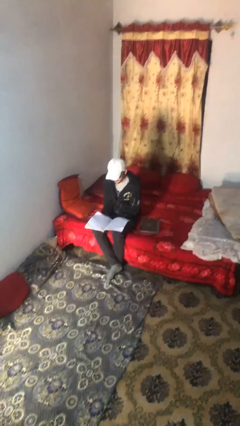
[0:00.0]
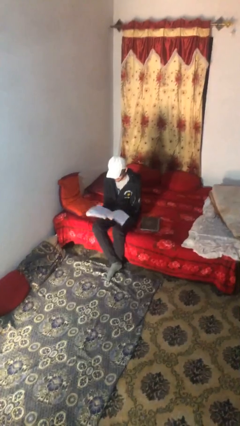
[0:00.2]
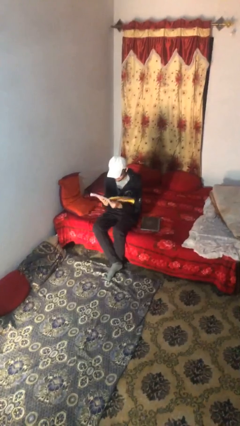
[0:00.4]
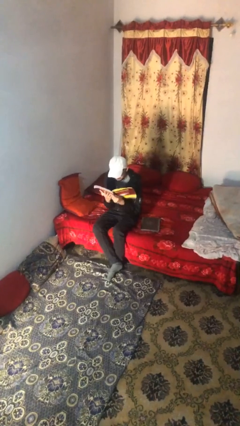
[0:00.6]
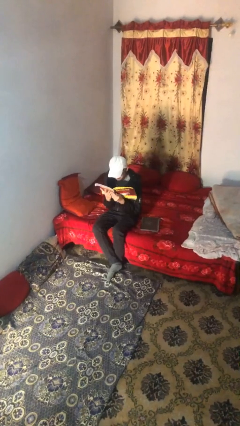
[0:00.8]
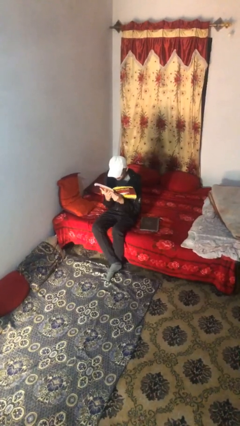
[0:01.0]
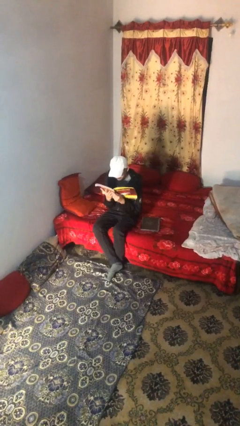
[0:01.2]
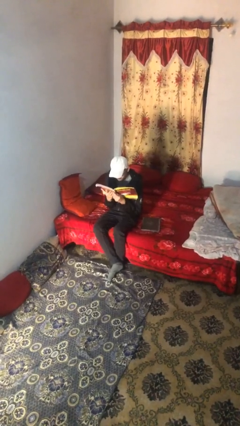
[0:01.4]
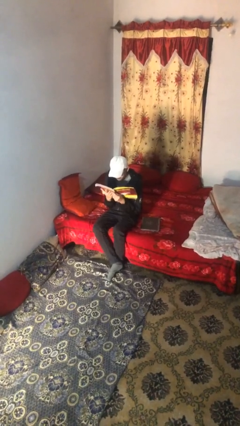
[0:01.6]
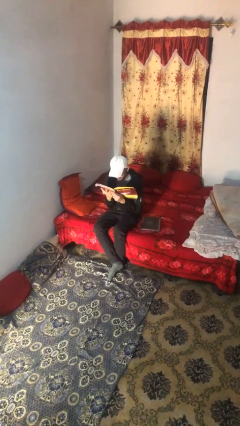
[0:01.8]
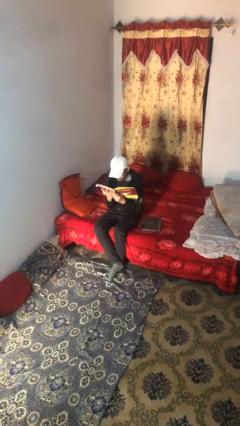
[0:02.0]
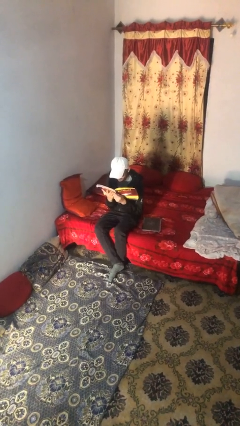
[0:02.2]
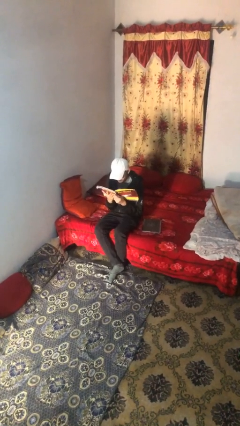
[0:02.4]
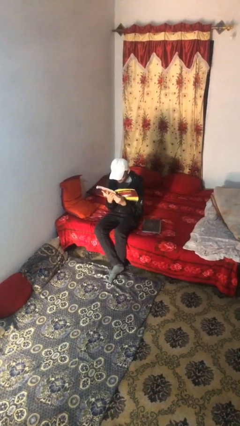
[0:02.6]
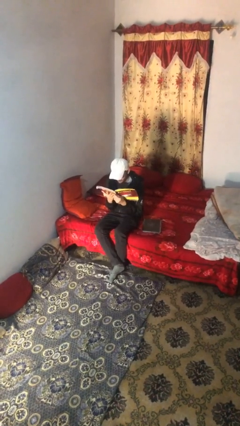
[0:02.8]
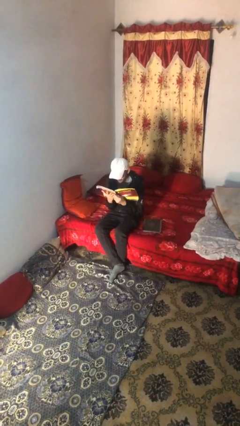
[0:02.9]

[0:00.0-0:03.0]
person reads document

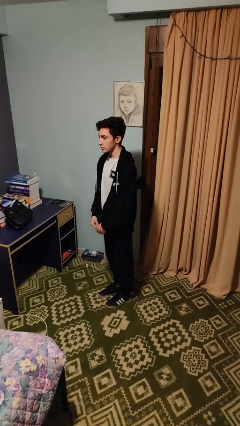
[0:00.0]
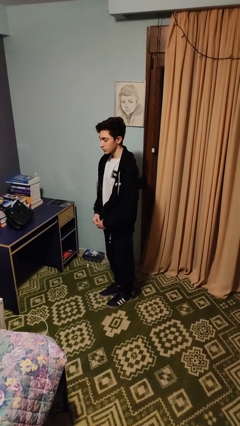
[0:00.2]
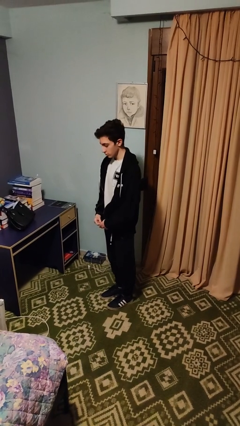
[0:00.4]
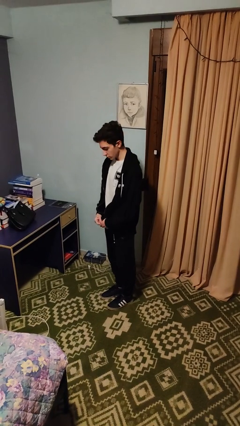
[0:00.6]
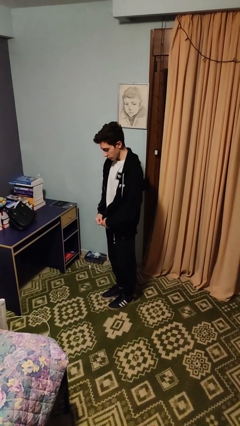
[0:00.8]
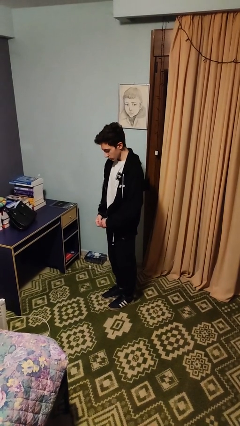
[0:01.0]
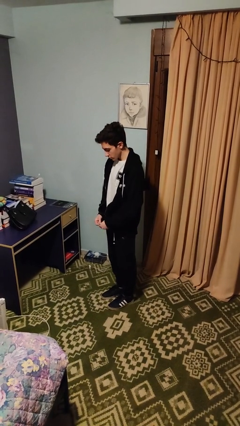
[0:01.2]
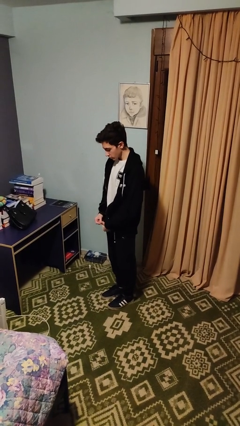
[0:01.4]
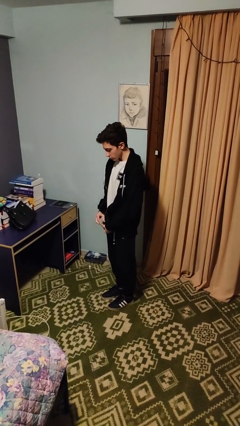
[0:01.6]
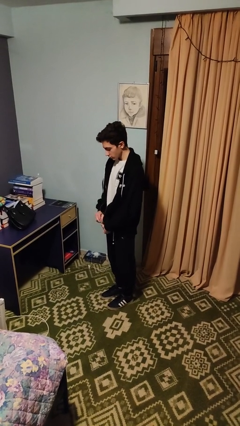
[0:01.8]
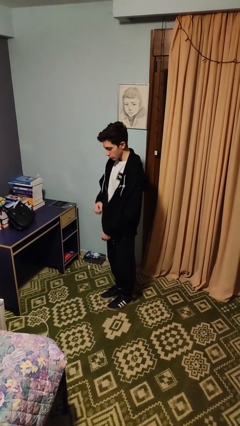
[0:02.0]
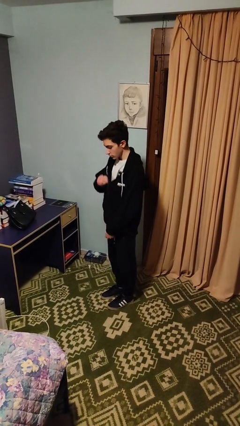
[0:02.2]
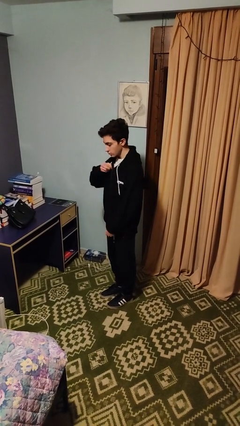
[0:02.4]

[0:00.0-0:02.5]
person zips up jacket

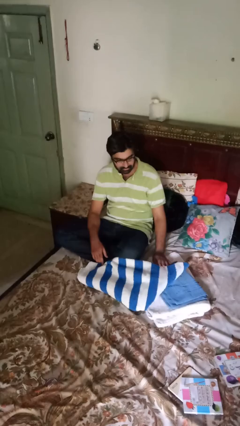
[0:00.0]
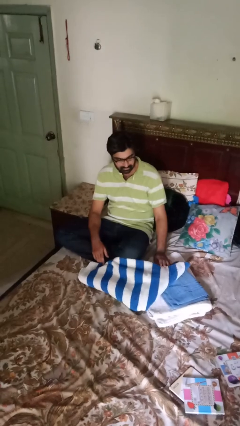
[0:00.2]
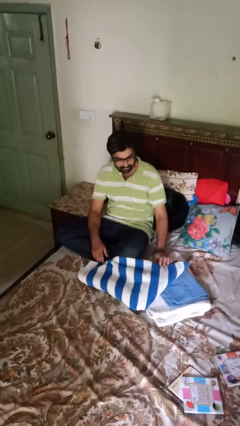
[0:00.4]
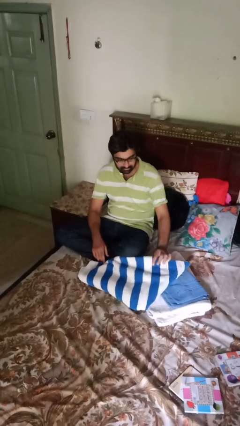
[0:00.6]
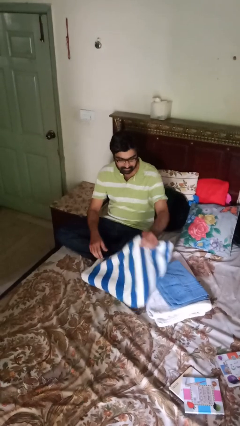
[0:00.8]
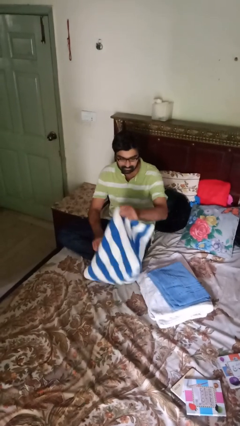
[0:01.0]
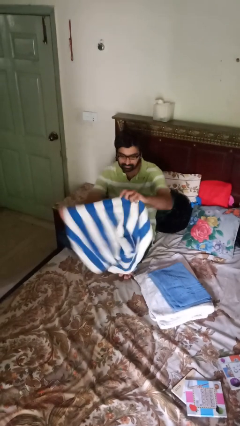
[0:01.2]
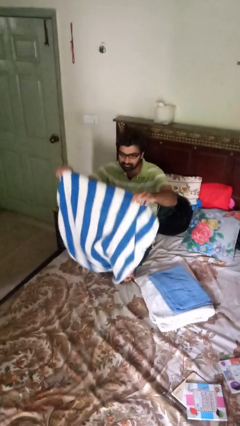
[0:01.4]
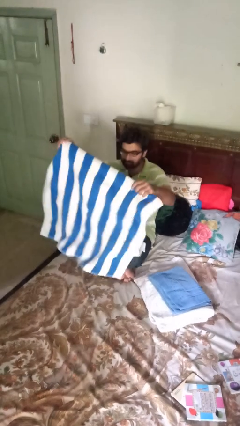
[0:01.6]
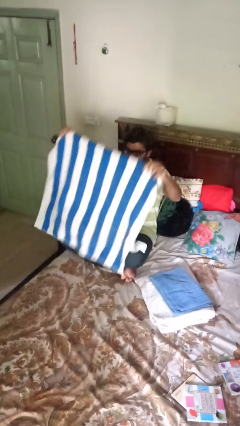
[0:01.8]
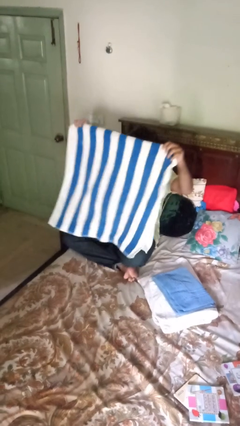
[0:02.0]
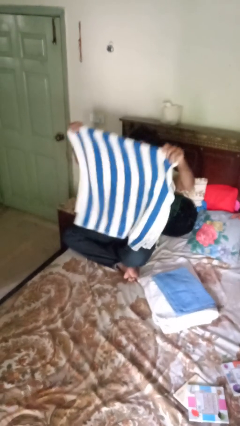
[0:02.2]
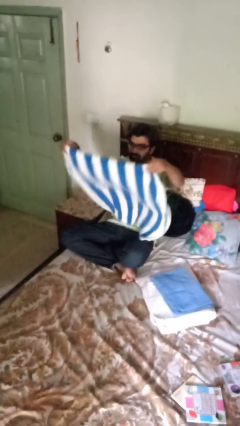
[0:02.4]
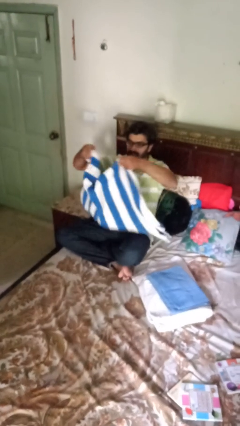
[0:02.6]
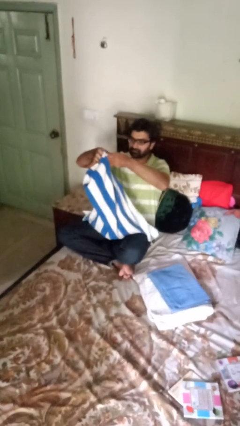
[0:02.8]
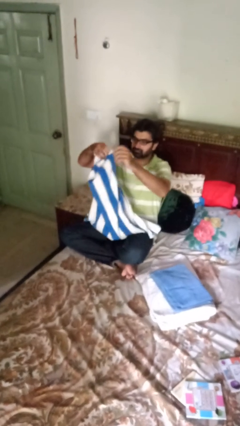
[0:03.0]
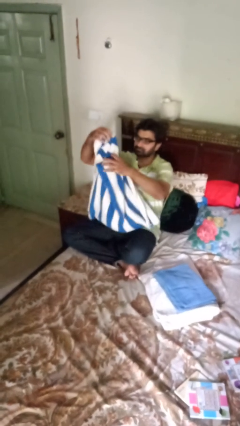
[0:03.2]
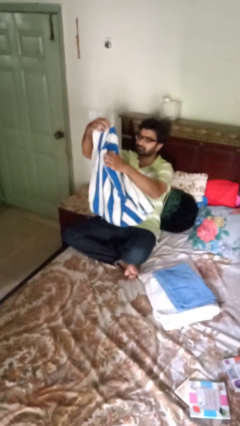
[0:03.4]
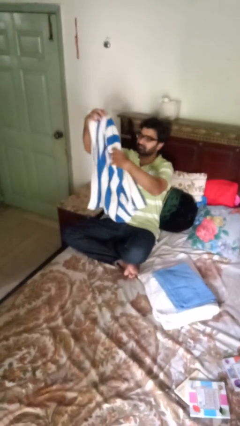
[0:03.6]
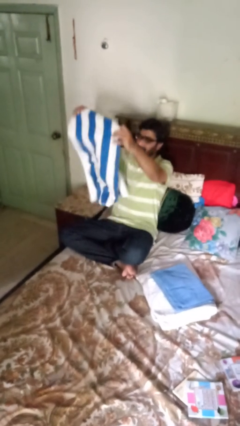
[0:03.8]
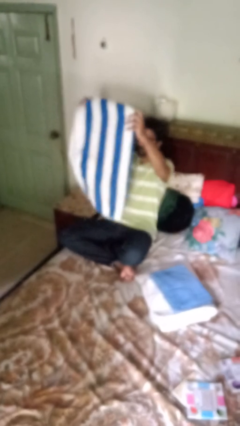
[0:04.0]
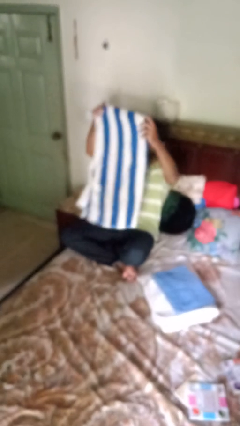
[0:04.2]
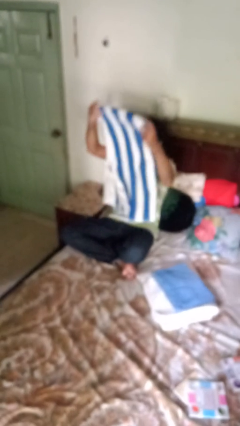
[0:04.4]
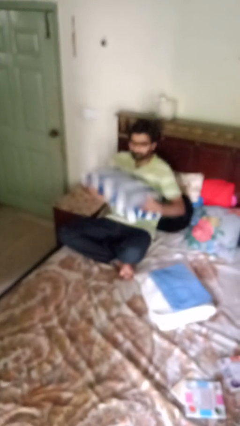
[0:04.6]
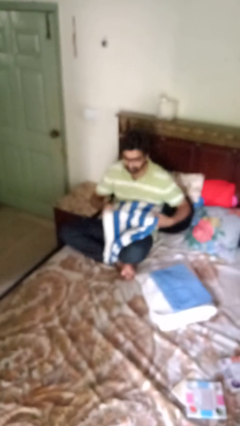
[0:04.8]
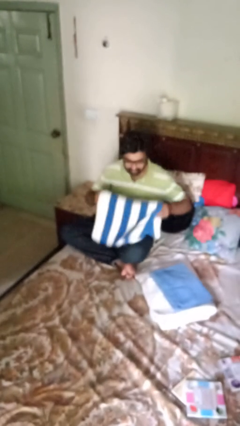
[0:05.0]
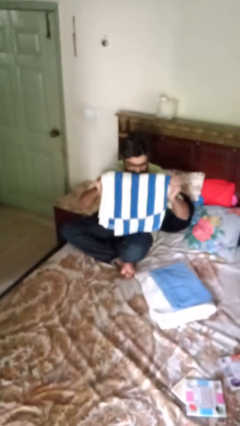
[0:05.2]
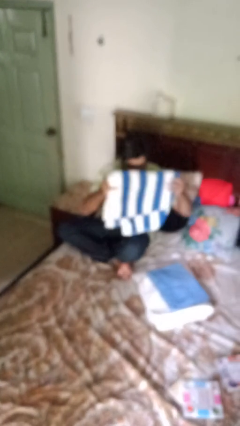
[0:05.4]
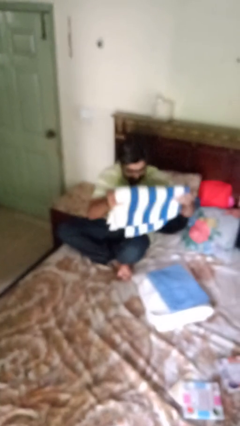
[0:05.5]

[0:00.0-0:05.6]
person folds towel

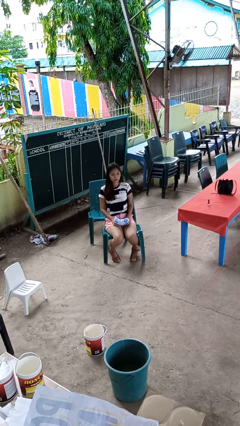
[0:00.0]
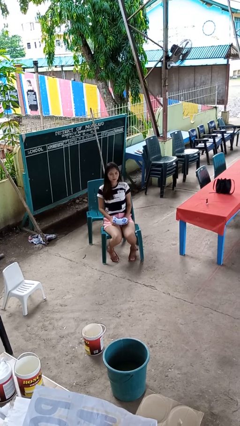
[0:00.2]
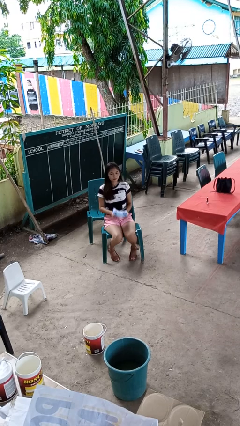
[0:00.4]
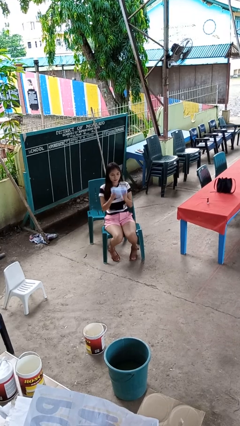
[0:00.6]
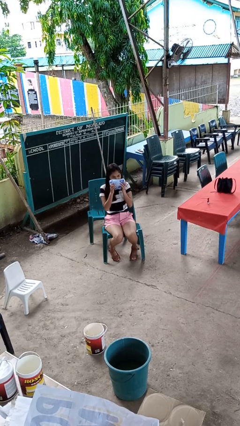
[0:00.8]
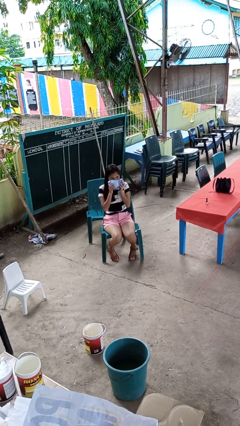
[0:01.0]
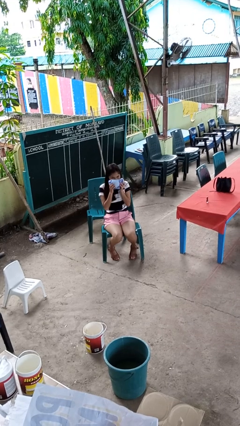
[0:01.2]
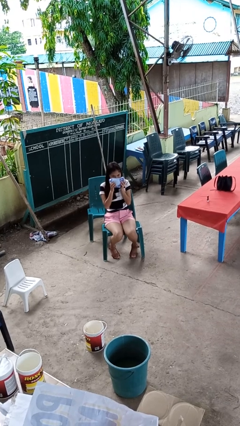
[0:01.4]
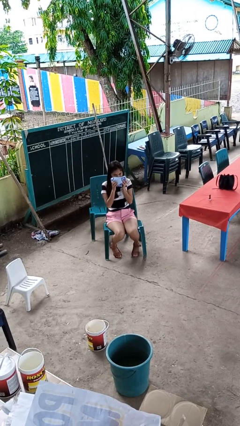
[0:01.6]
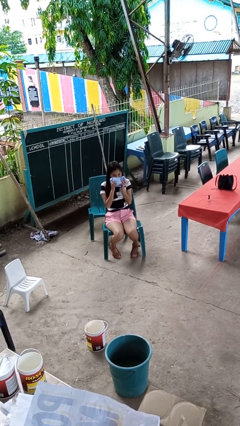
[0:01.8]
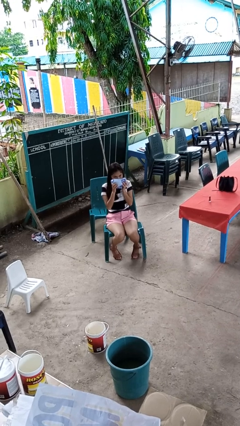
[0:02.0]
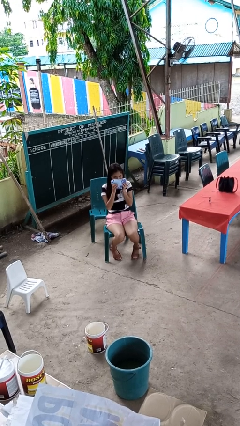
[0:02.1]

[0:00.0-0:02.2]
person blows nose

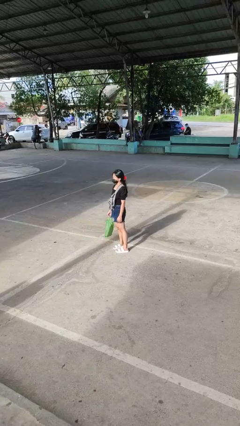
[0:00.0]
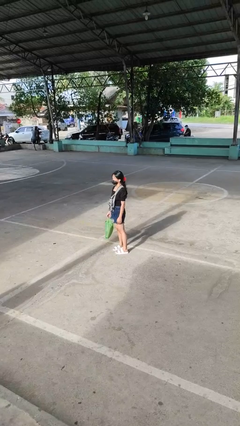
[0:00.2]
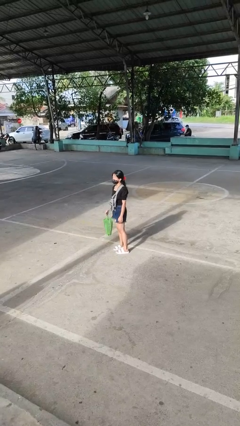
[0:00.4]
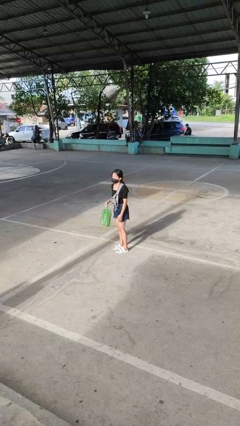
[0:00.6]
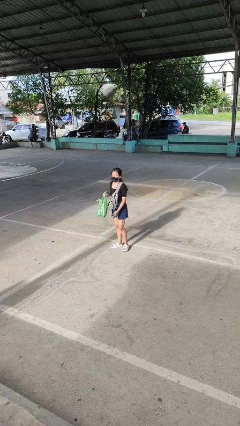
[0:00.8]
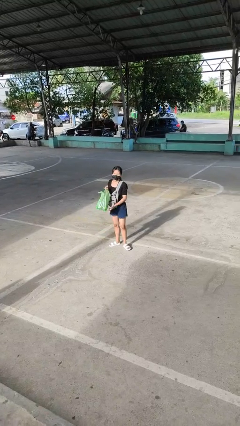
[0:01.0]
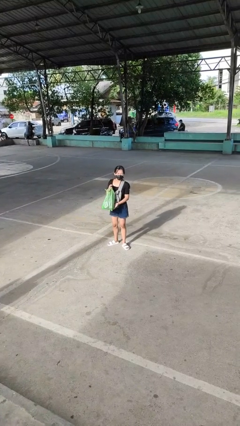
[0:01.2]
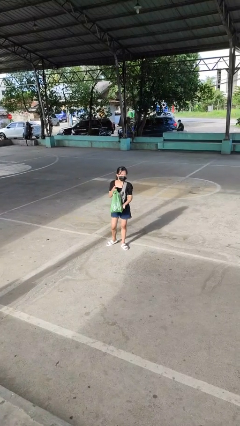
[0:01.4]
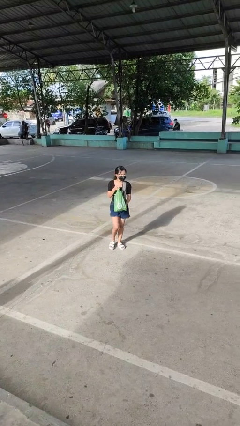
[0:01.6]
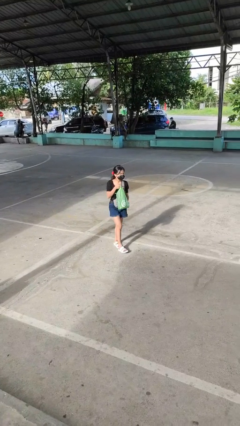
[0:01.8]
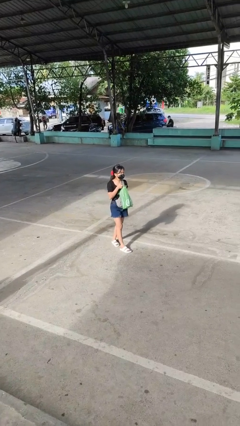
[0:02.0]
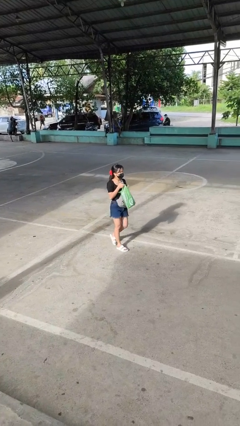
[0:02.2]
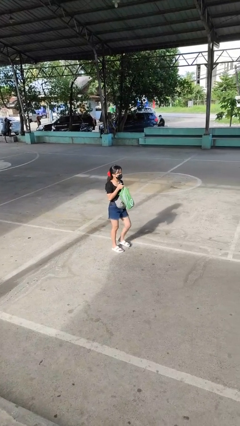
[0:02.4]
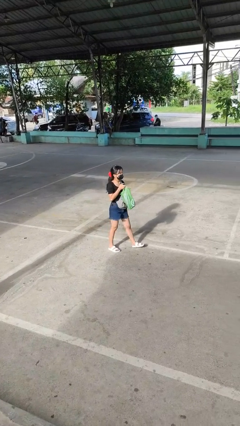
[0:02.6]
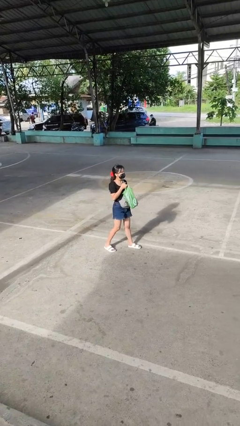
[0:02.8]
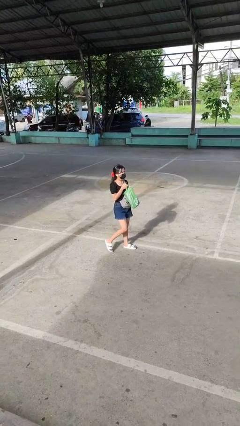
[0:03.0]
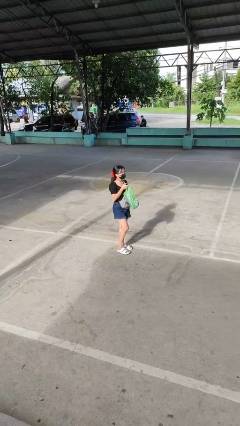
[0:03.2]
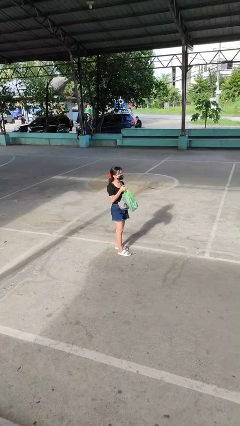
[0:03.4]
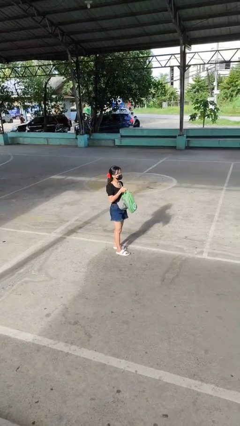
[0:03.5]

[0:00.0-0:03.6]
person carries groceries

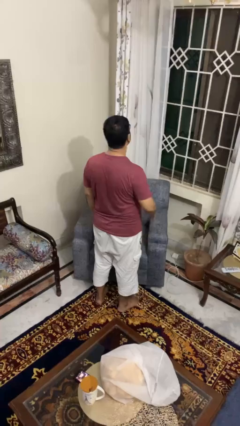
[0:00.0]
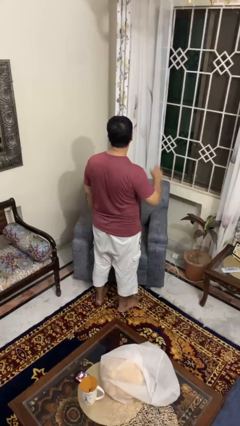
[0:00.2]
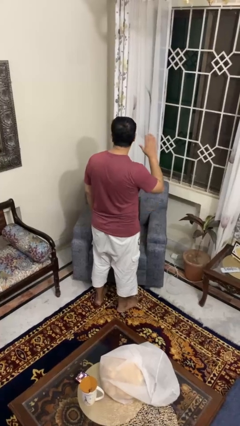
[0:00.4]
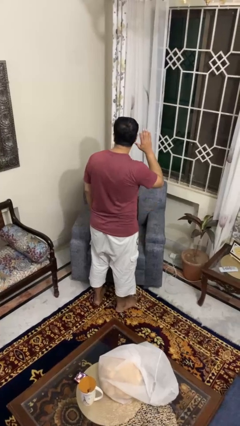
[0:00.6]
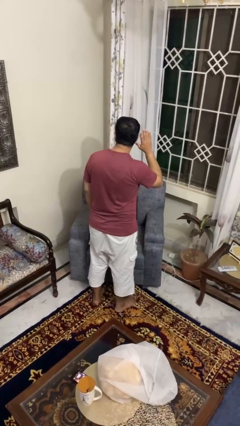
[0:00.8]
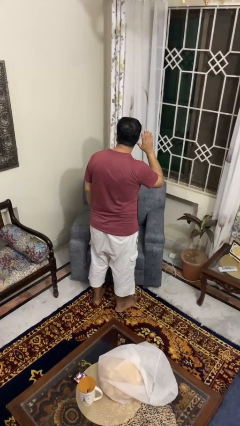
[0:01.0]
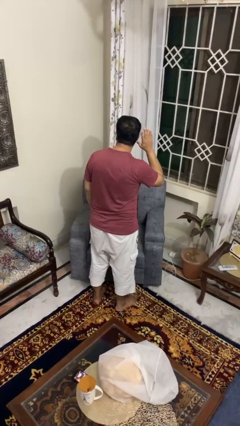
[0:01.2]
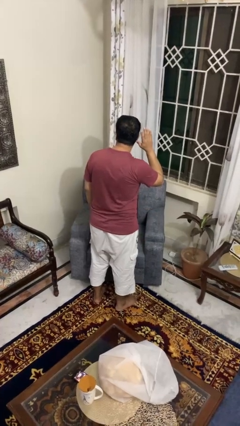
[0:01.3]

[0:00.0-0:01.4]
person gestures listen closely
